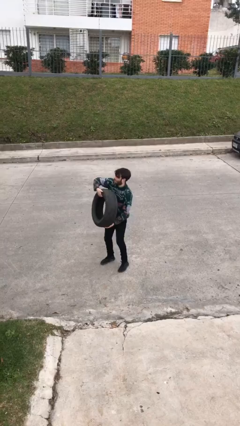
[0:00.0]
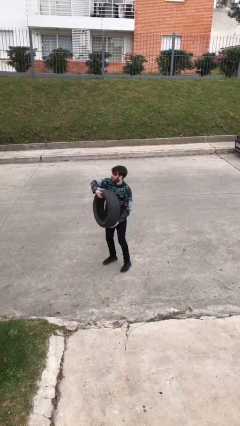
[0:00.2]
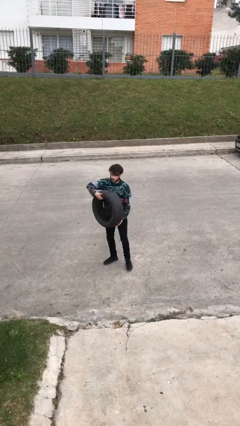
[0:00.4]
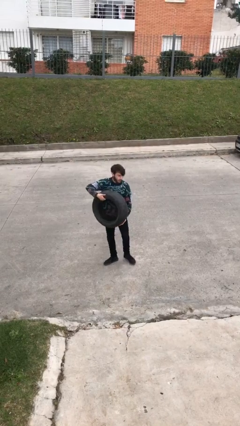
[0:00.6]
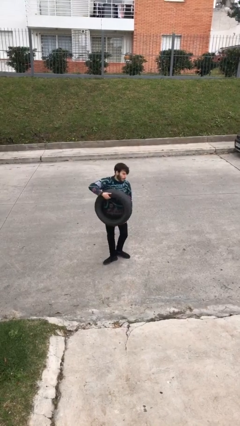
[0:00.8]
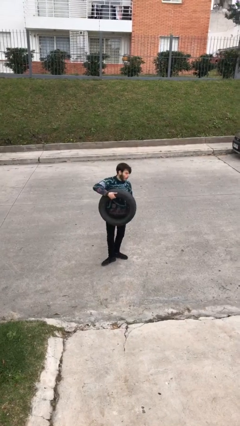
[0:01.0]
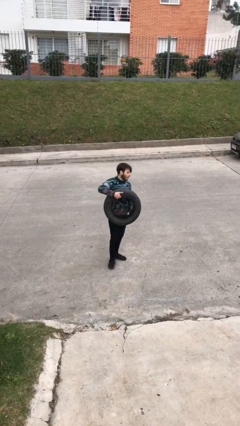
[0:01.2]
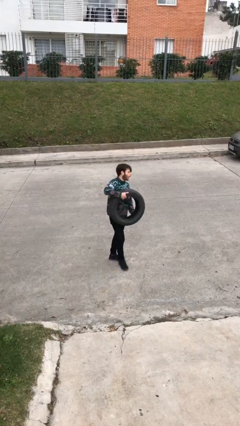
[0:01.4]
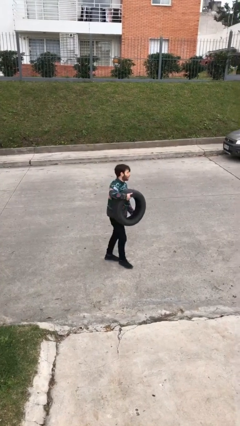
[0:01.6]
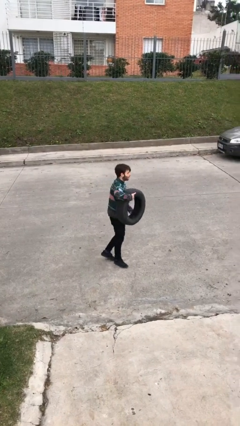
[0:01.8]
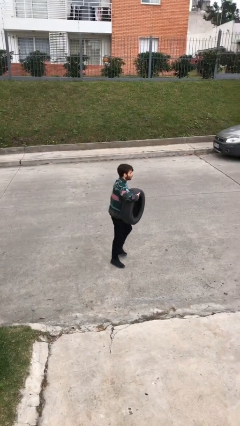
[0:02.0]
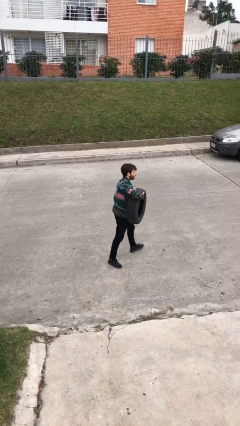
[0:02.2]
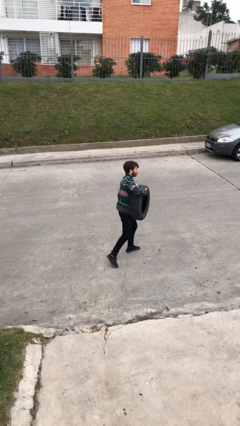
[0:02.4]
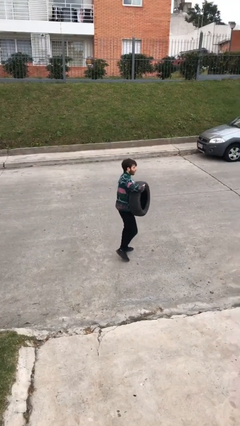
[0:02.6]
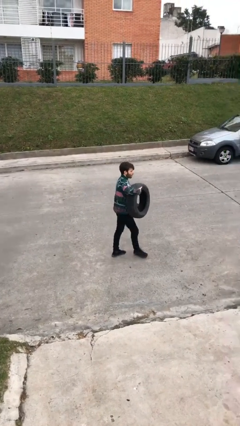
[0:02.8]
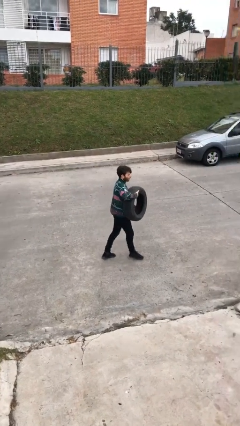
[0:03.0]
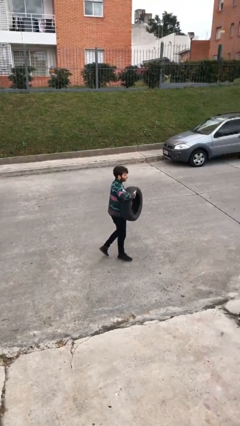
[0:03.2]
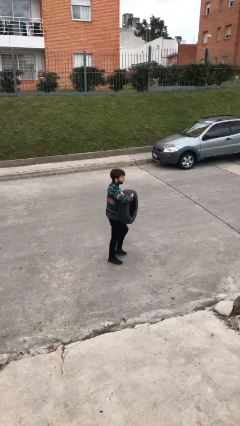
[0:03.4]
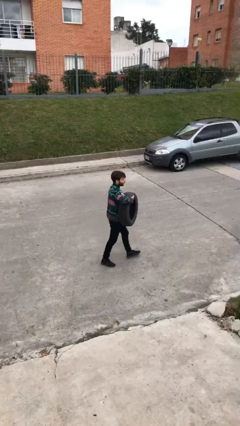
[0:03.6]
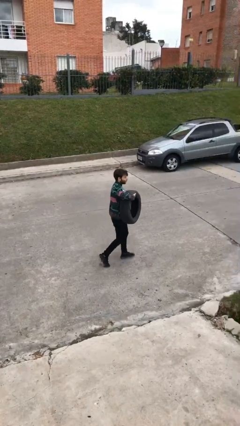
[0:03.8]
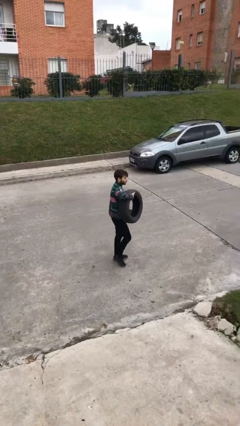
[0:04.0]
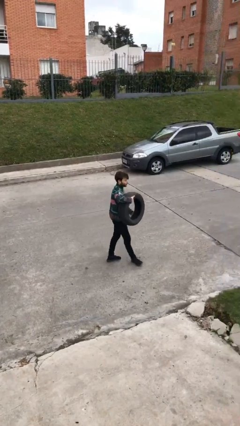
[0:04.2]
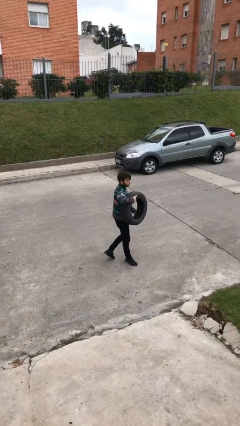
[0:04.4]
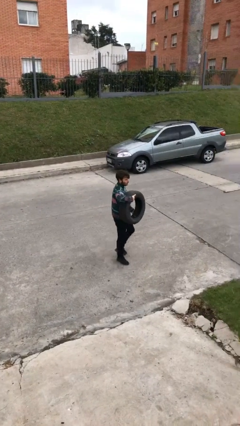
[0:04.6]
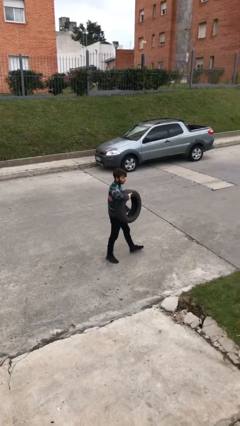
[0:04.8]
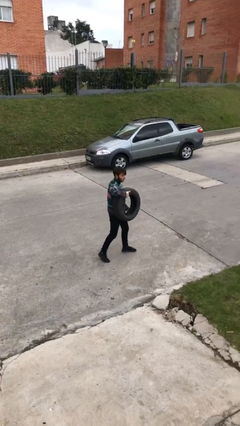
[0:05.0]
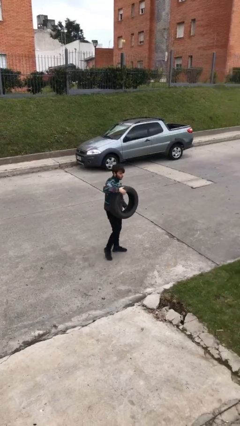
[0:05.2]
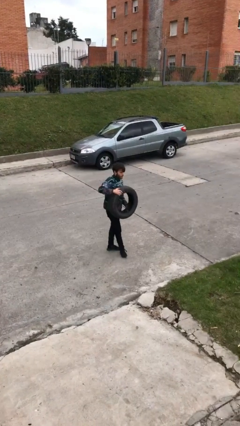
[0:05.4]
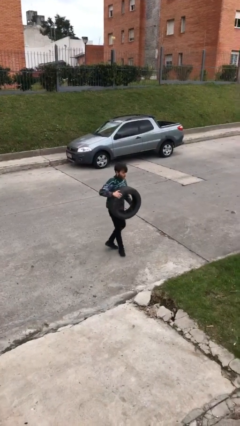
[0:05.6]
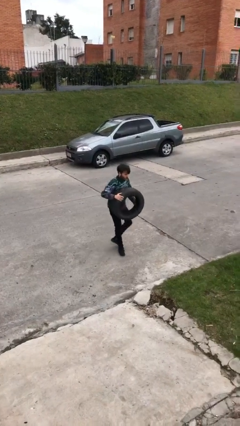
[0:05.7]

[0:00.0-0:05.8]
person carries heavy object

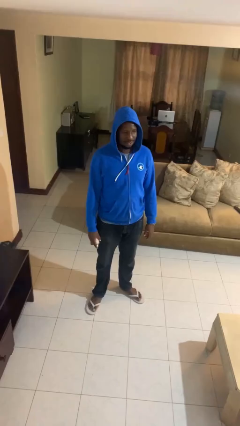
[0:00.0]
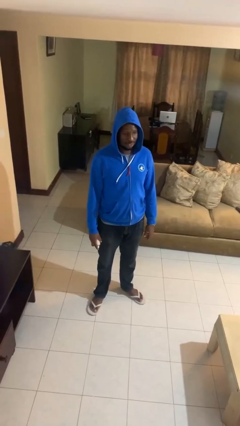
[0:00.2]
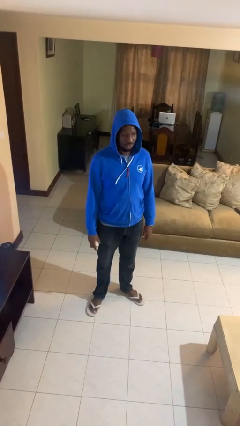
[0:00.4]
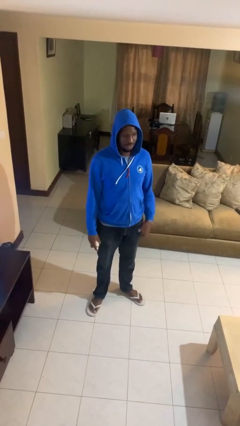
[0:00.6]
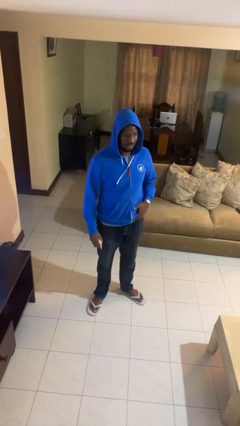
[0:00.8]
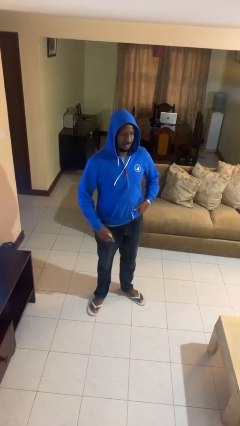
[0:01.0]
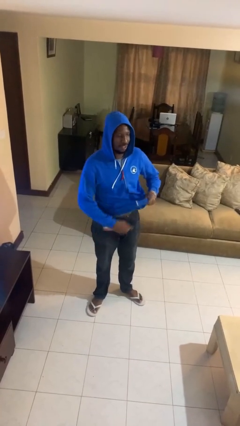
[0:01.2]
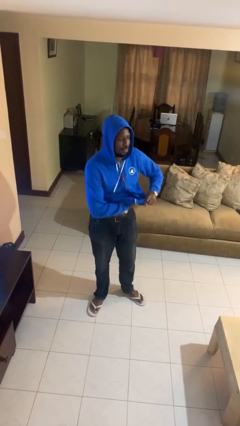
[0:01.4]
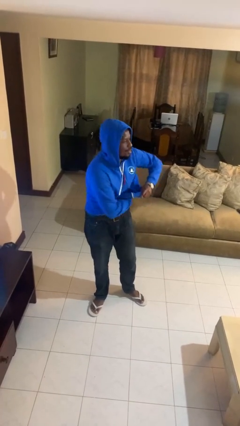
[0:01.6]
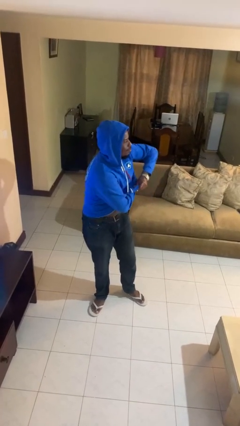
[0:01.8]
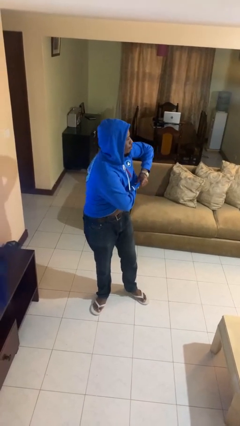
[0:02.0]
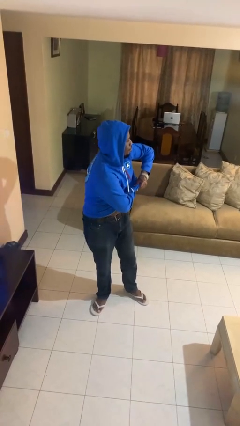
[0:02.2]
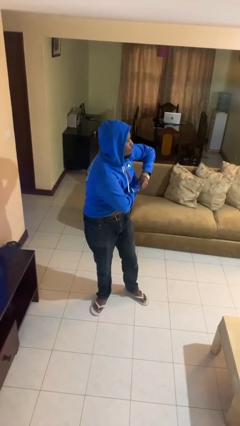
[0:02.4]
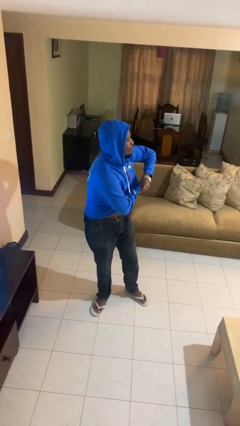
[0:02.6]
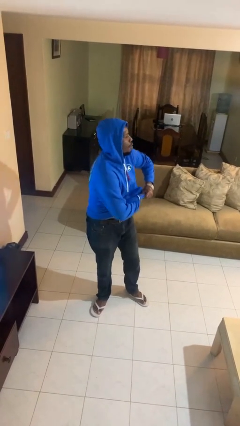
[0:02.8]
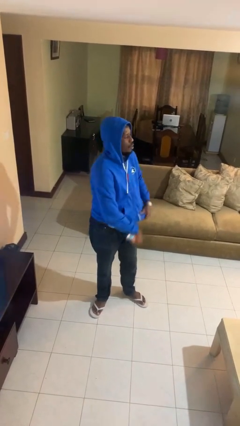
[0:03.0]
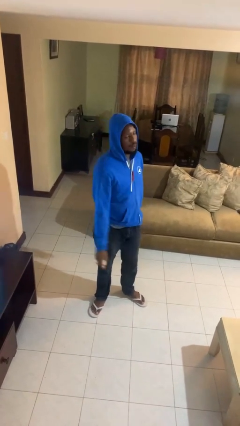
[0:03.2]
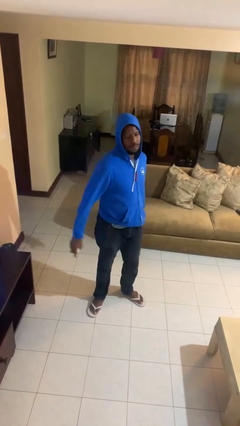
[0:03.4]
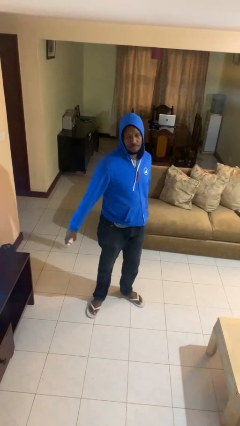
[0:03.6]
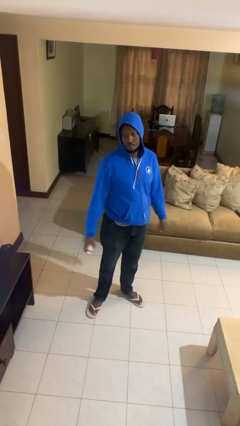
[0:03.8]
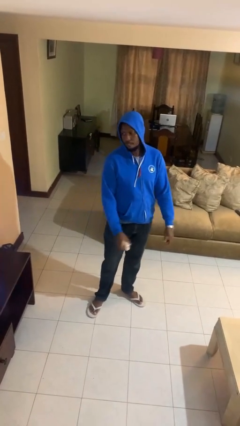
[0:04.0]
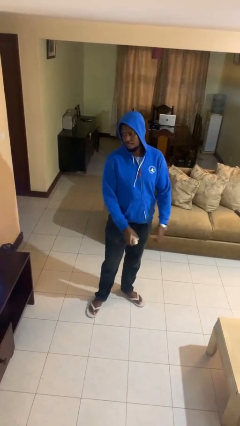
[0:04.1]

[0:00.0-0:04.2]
person applies deodorant

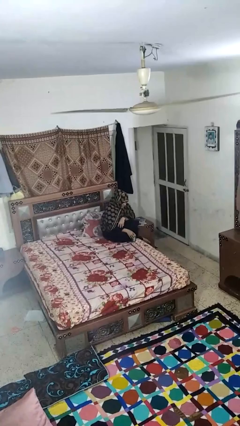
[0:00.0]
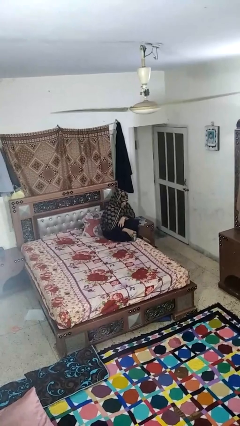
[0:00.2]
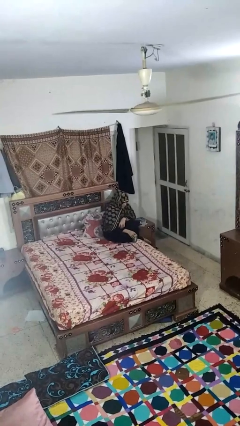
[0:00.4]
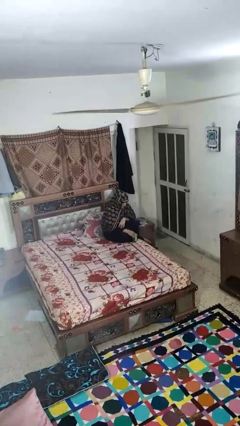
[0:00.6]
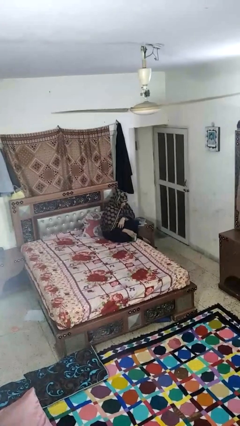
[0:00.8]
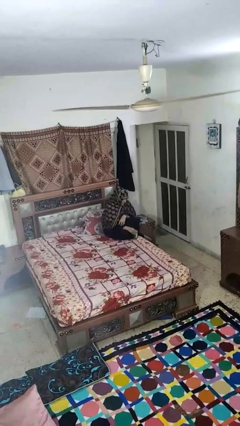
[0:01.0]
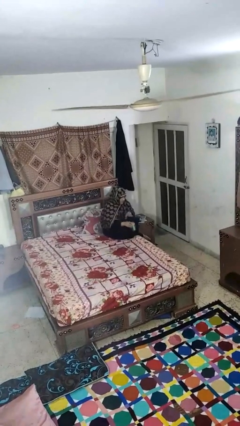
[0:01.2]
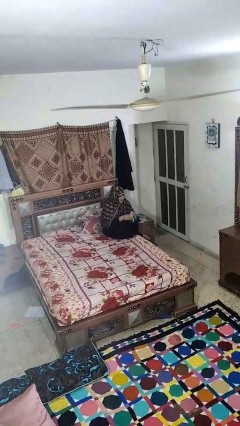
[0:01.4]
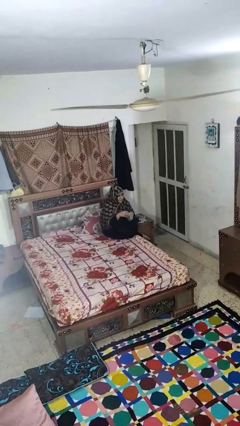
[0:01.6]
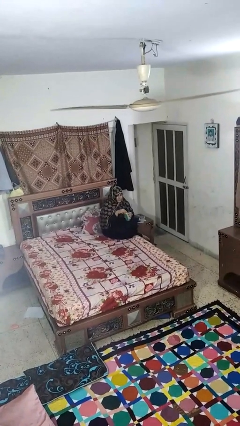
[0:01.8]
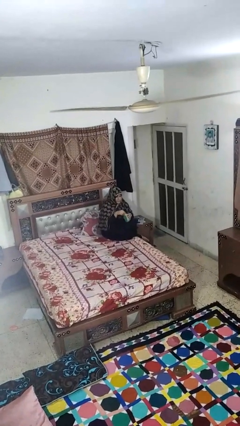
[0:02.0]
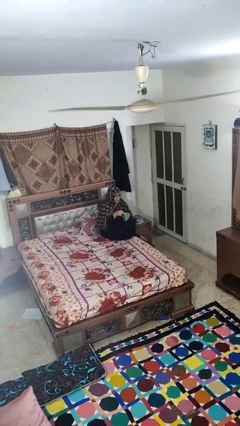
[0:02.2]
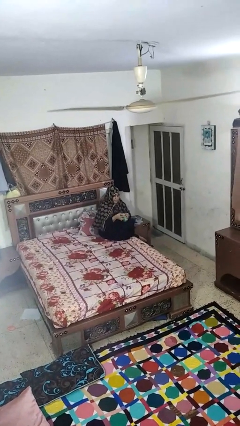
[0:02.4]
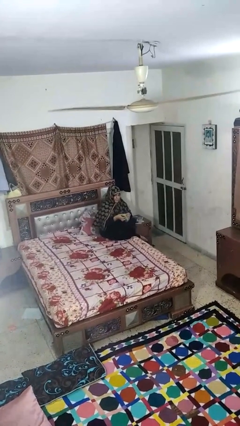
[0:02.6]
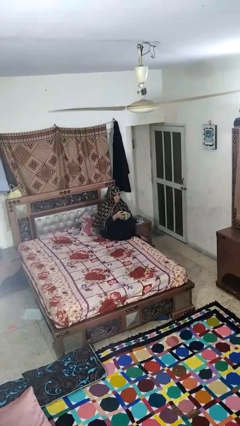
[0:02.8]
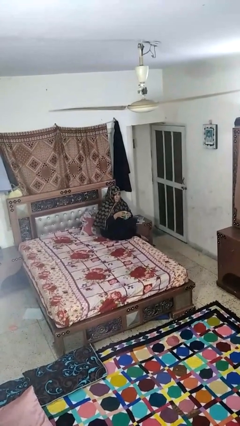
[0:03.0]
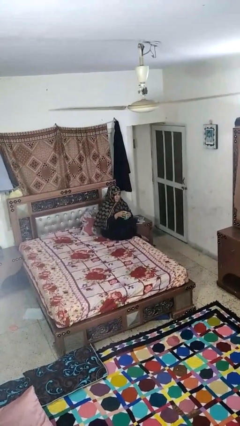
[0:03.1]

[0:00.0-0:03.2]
person opens beverage can

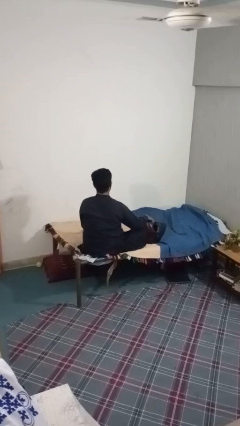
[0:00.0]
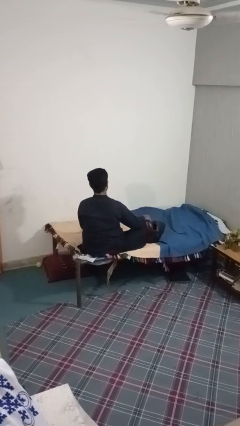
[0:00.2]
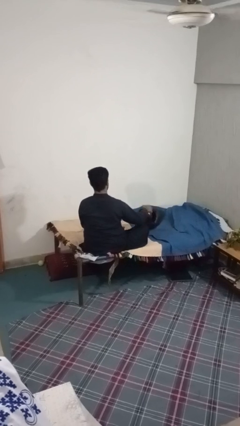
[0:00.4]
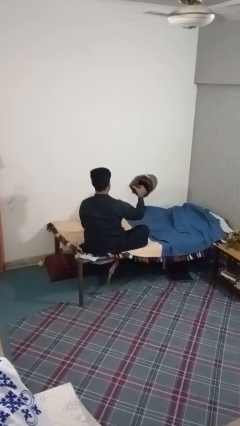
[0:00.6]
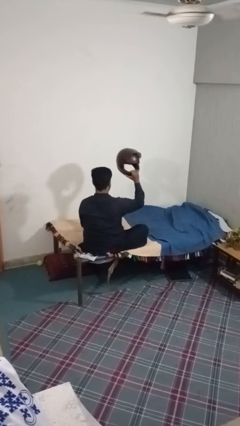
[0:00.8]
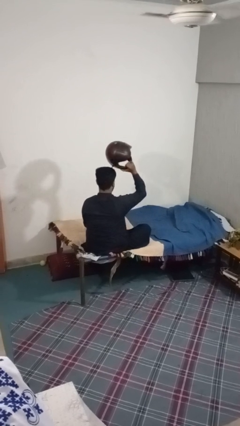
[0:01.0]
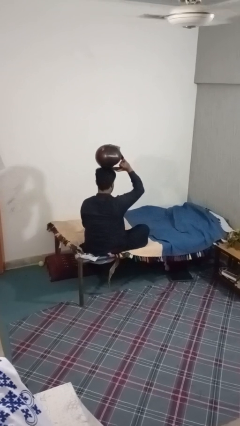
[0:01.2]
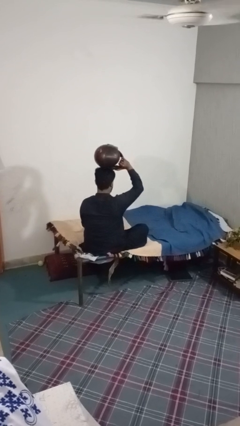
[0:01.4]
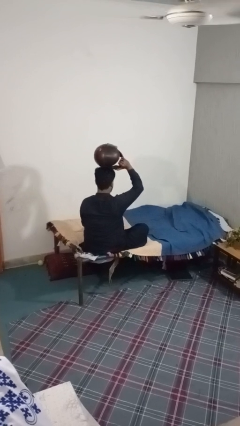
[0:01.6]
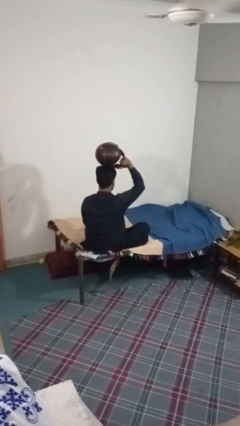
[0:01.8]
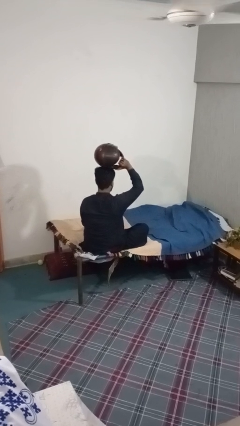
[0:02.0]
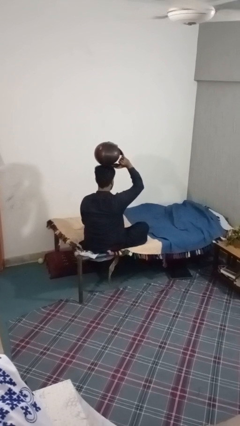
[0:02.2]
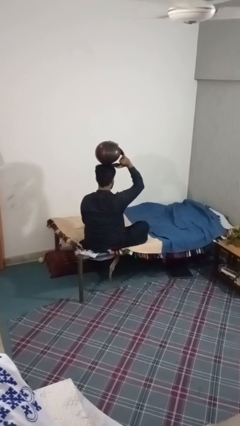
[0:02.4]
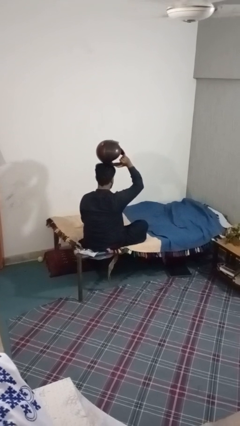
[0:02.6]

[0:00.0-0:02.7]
person holds object above head

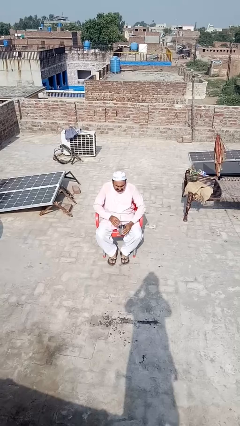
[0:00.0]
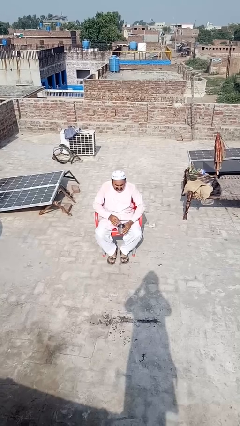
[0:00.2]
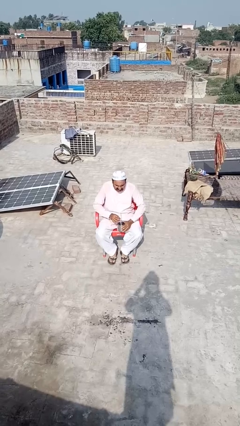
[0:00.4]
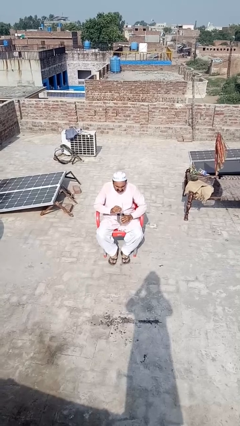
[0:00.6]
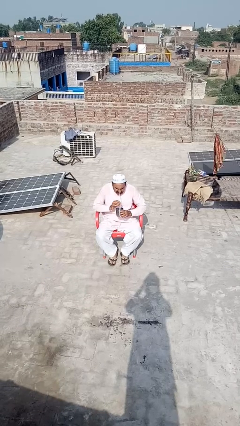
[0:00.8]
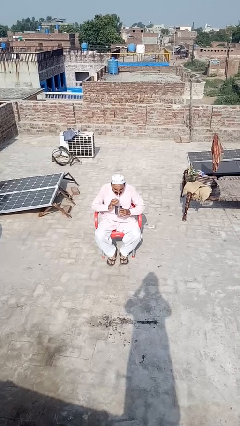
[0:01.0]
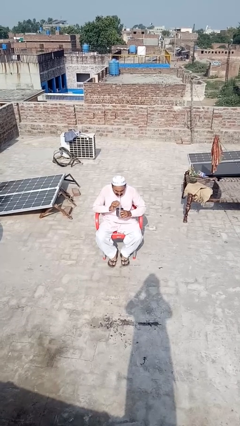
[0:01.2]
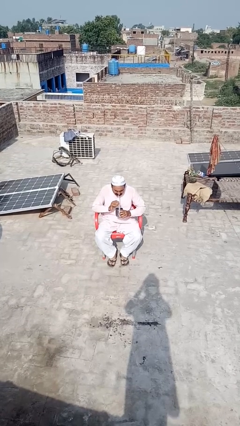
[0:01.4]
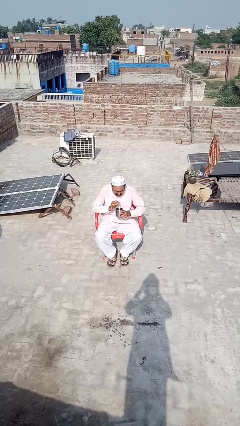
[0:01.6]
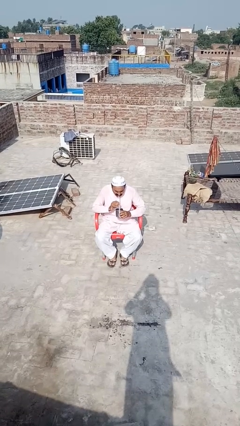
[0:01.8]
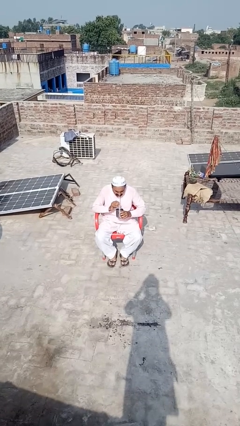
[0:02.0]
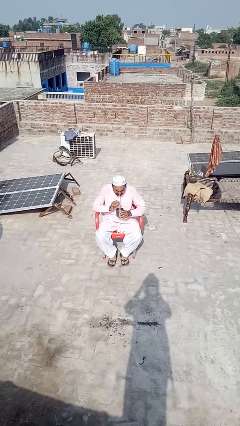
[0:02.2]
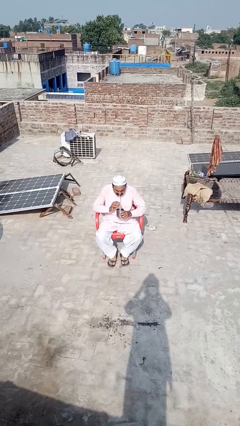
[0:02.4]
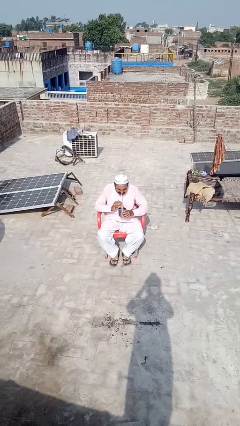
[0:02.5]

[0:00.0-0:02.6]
person drinks from straw
